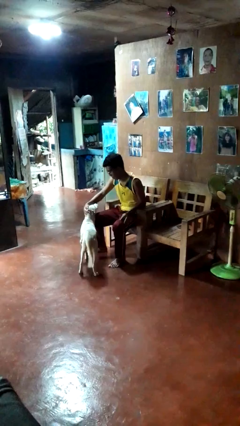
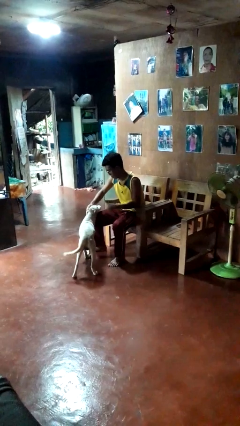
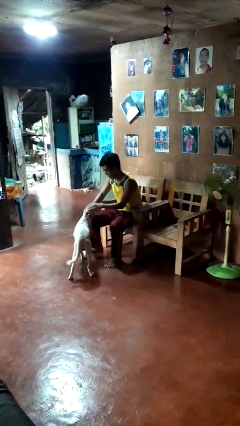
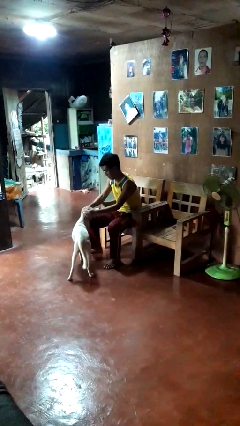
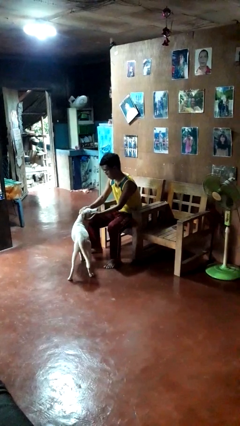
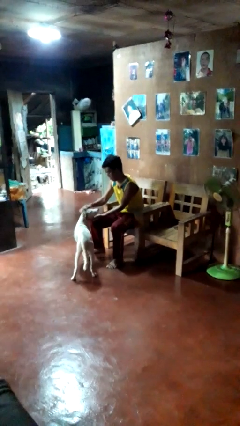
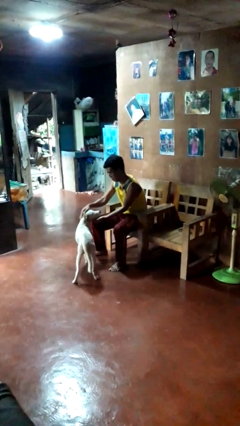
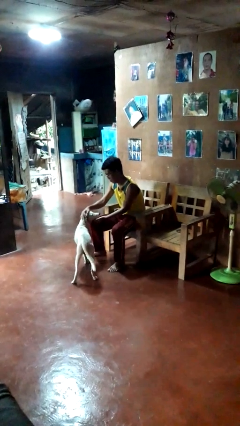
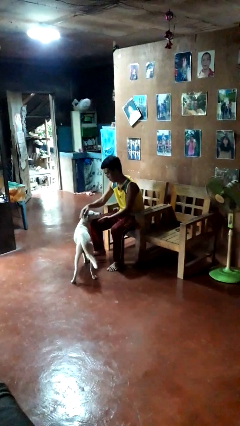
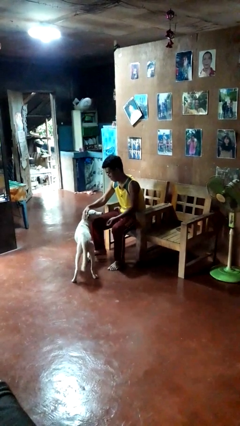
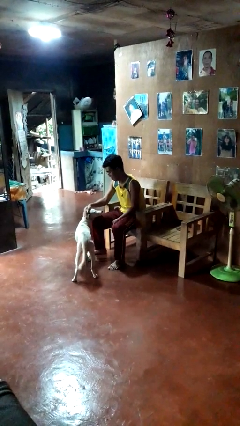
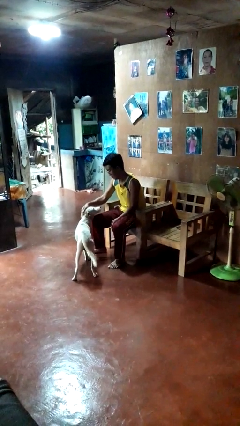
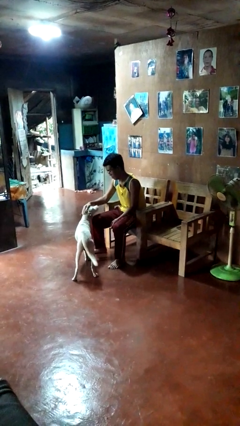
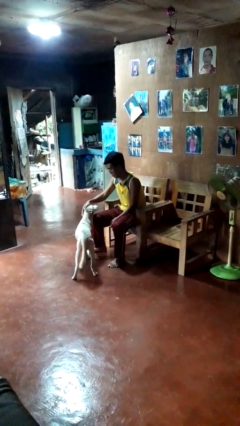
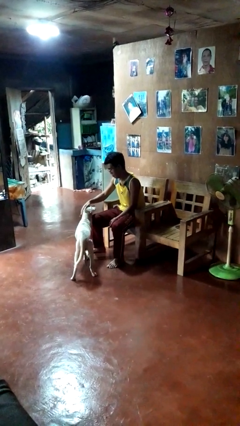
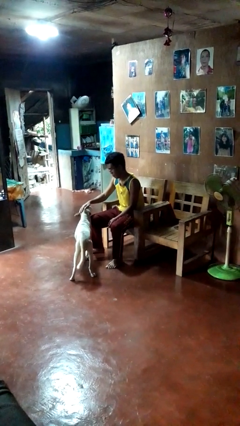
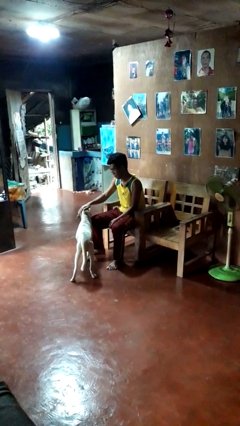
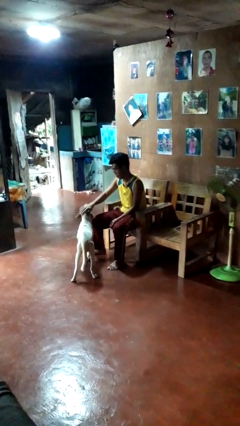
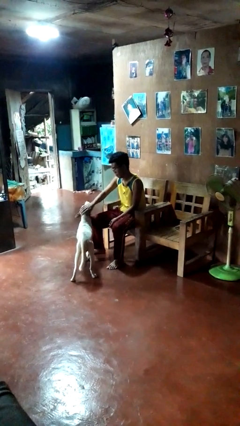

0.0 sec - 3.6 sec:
person pets dog

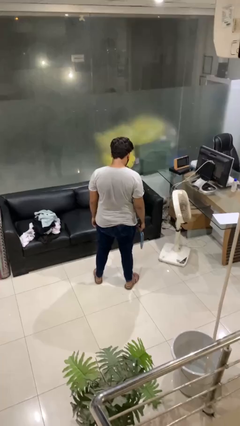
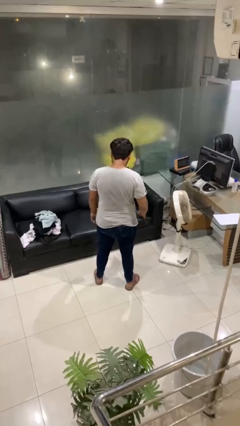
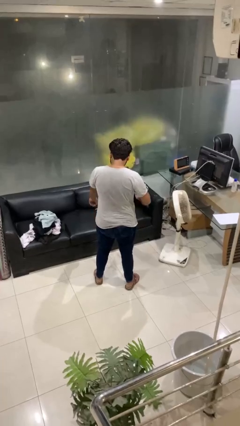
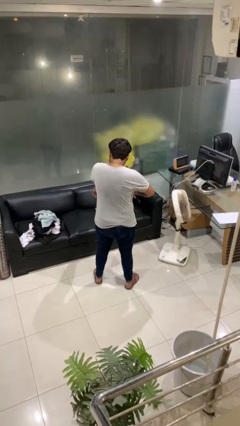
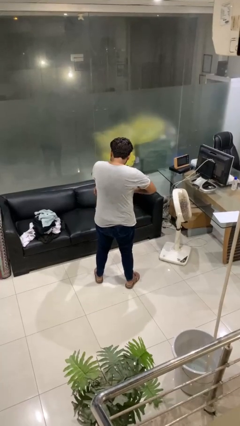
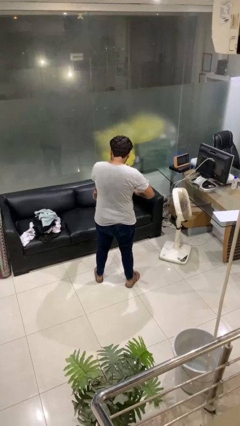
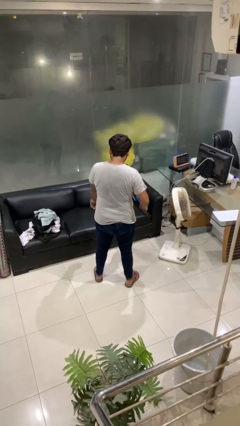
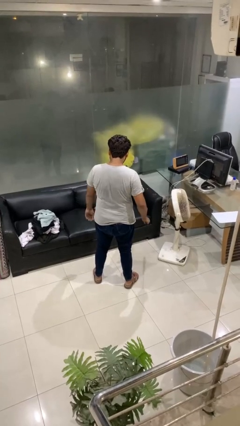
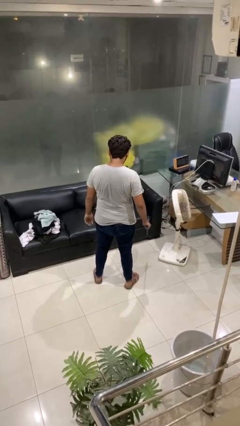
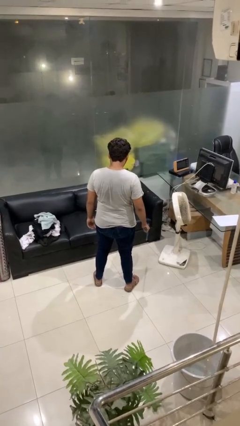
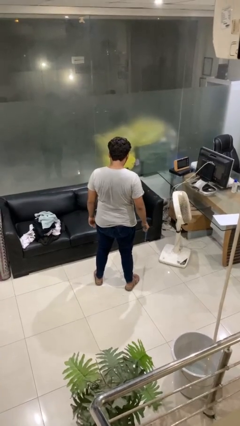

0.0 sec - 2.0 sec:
person swats bug

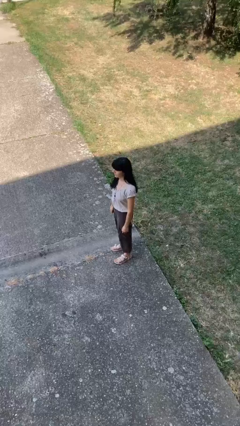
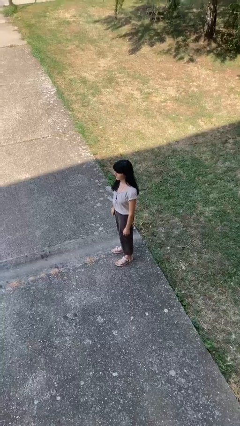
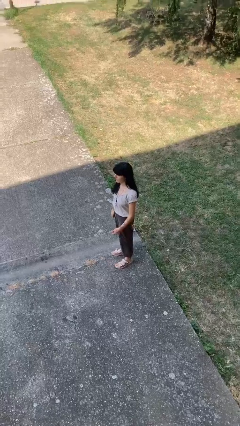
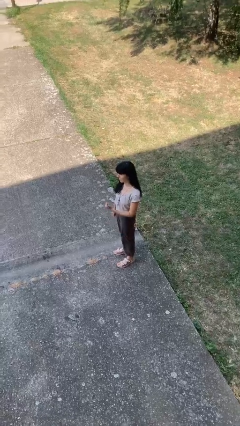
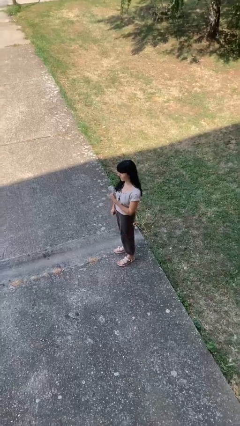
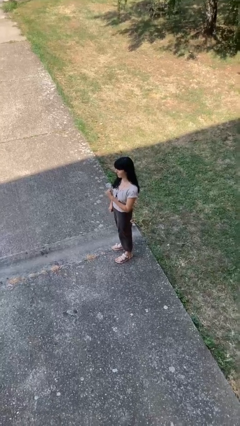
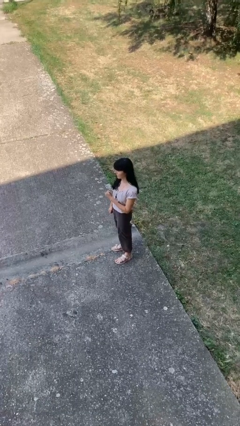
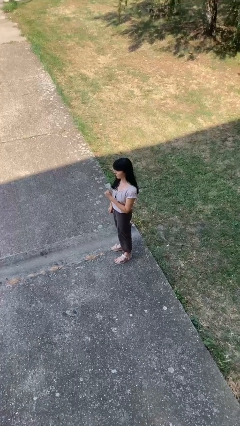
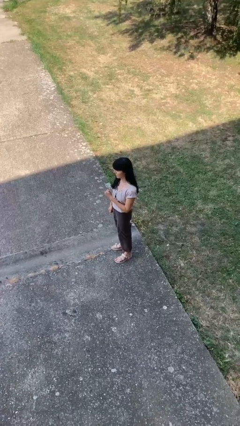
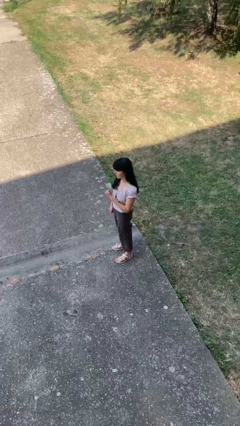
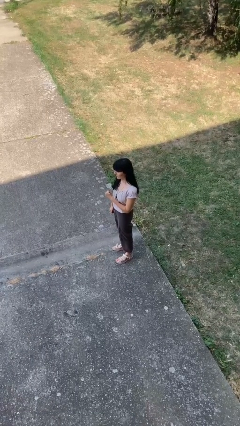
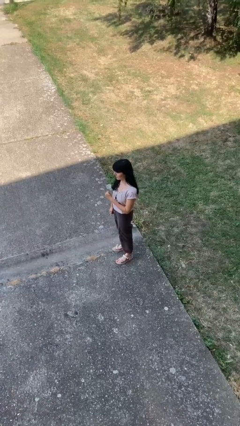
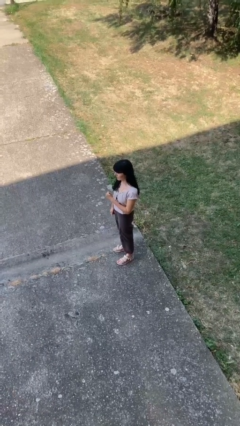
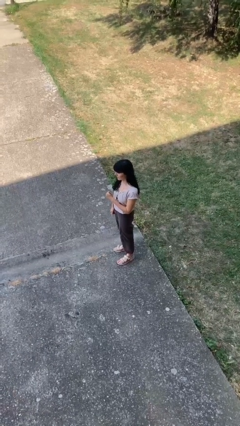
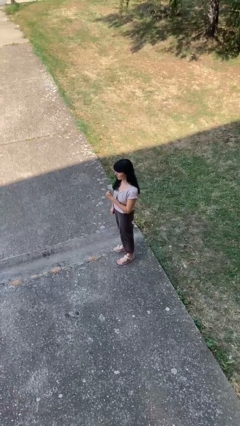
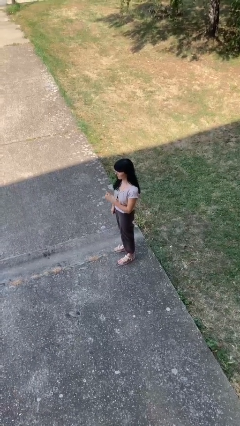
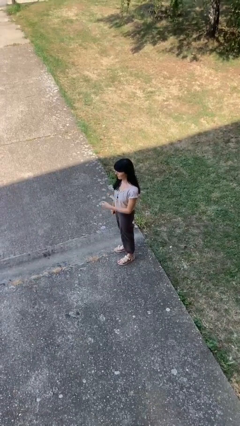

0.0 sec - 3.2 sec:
person gestures thumbs up

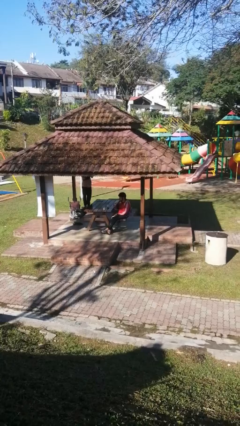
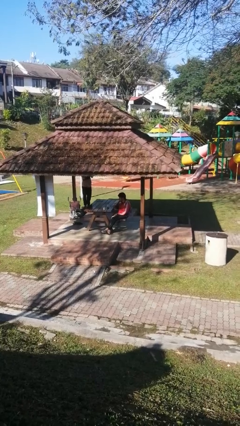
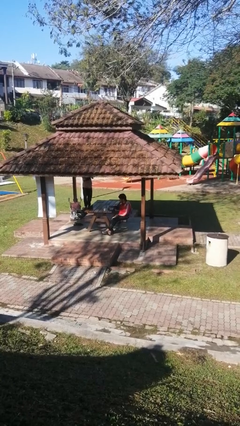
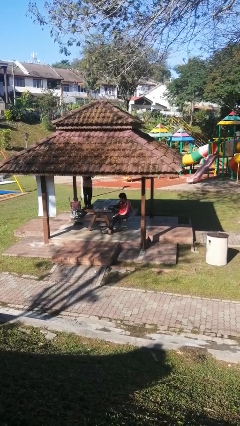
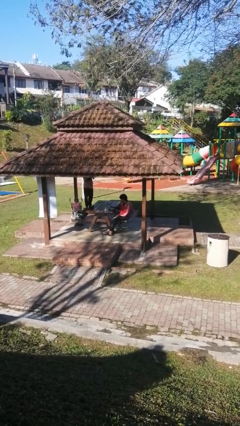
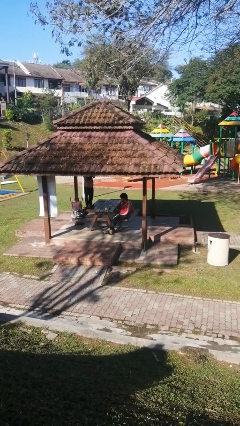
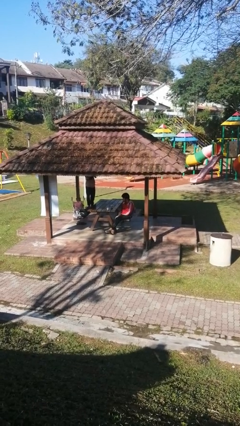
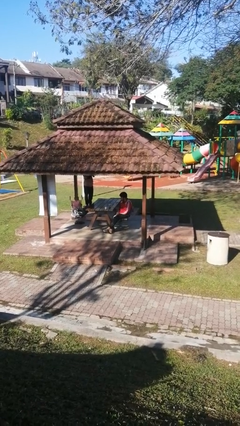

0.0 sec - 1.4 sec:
person puts down object on table

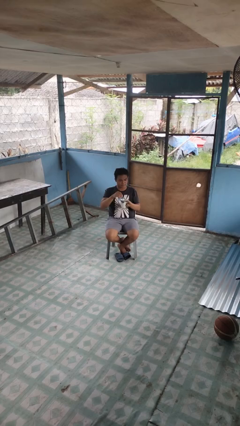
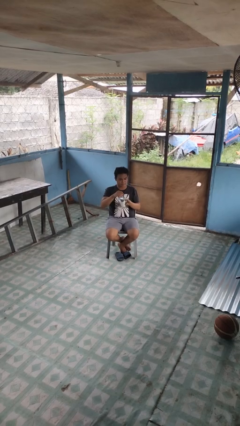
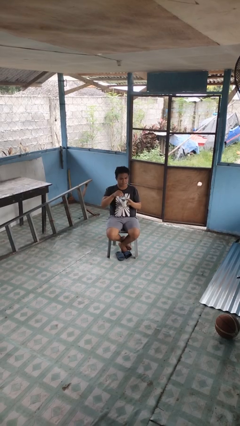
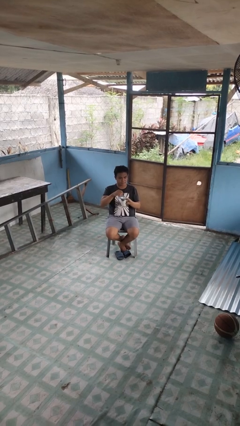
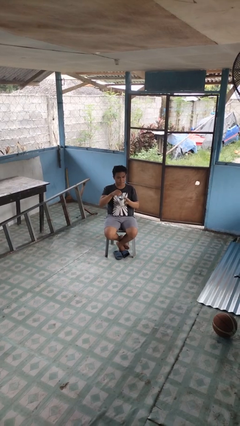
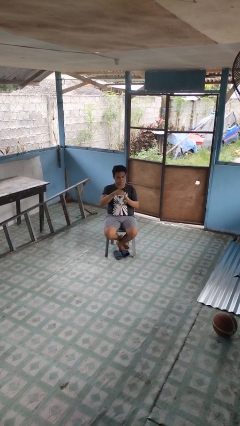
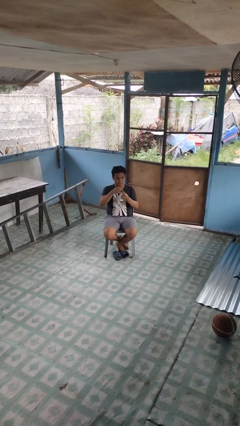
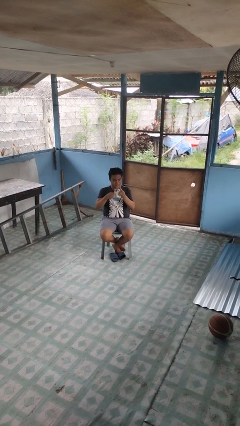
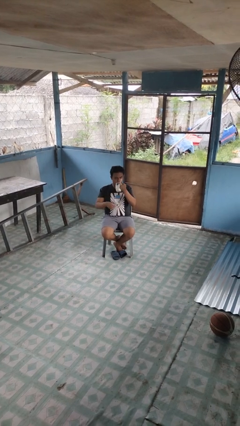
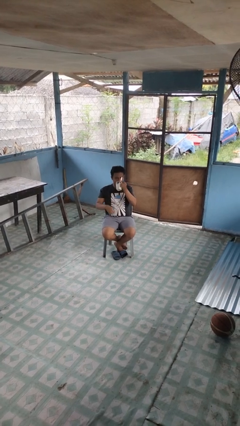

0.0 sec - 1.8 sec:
person stirs mug

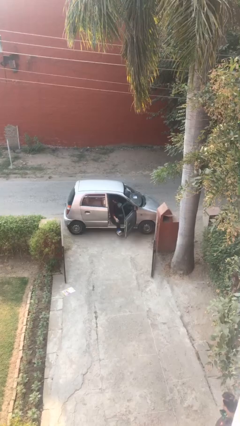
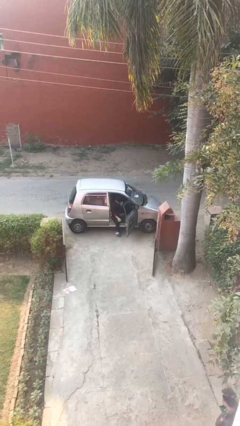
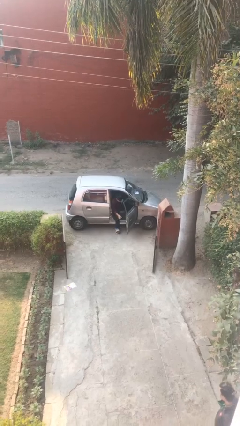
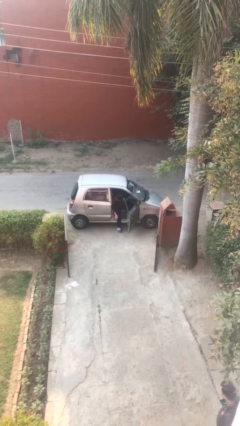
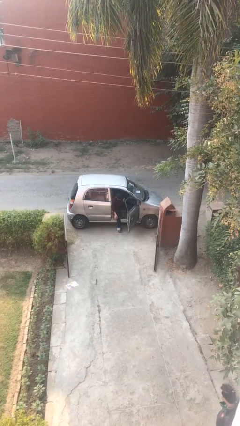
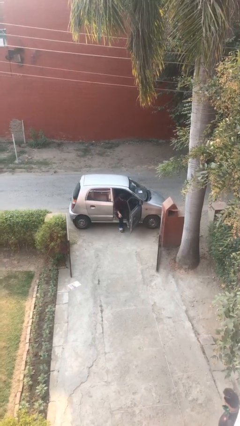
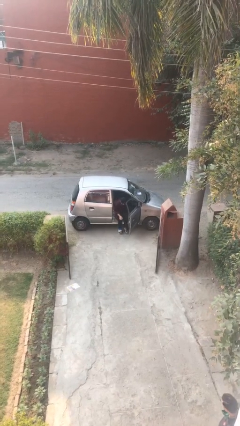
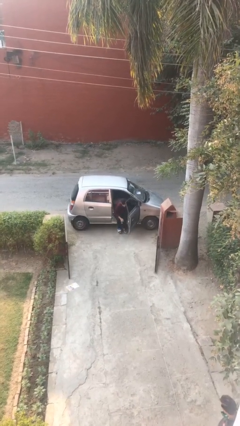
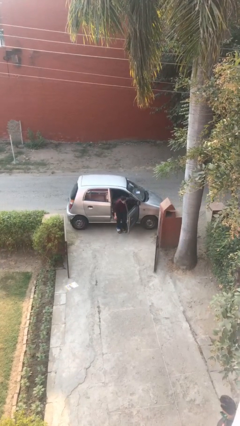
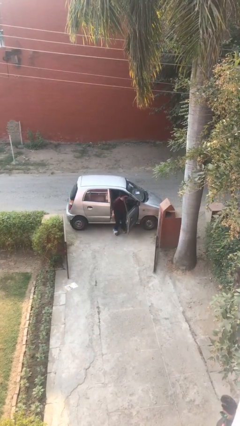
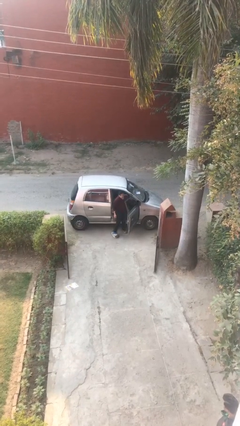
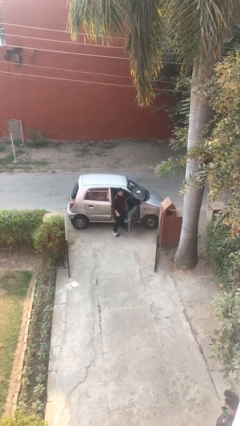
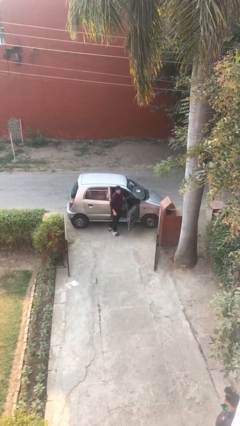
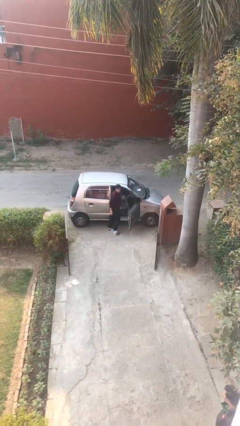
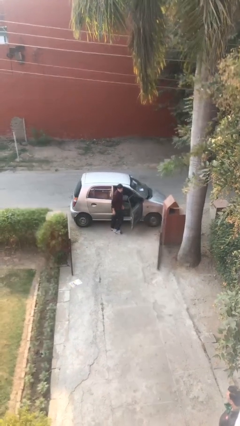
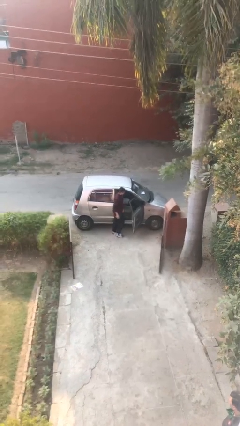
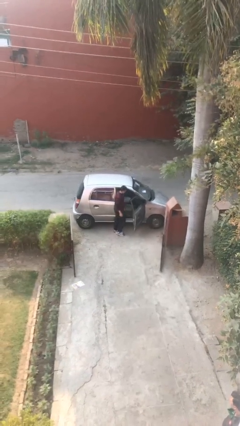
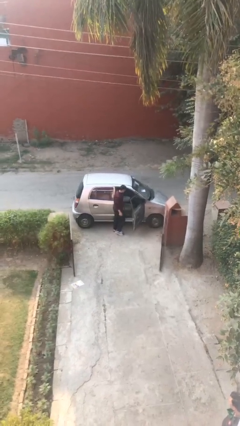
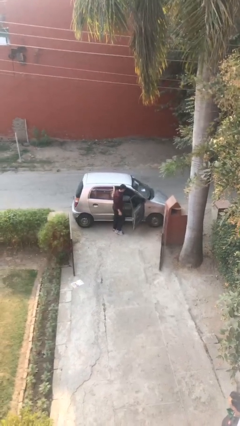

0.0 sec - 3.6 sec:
person exits car

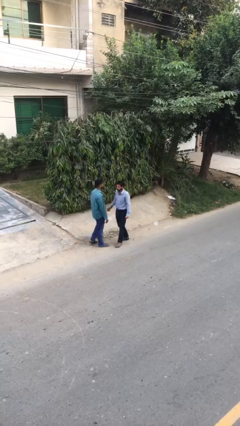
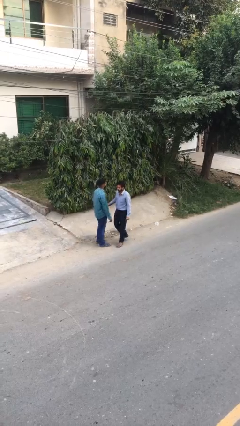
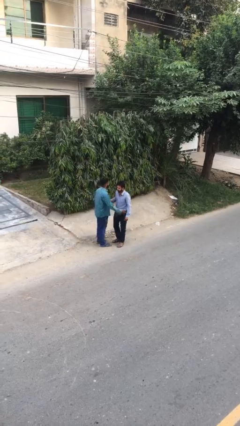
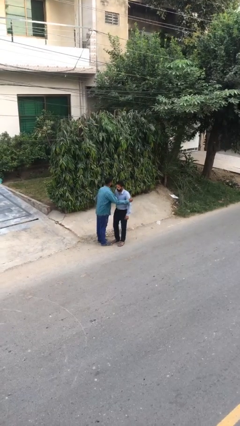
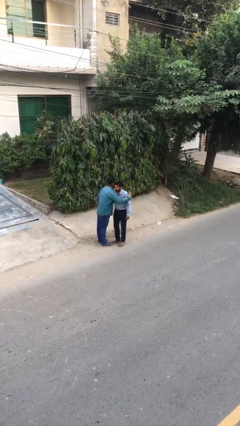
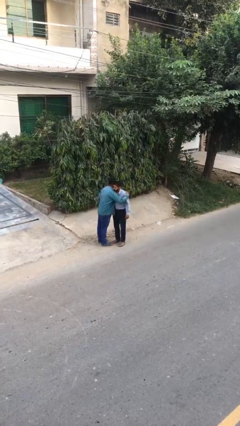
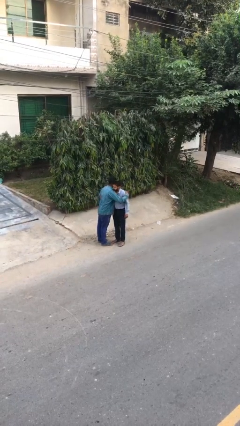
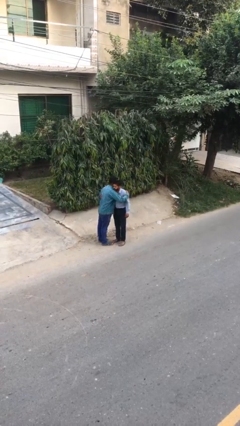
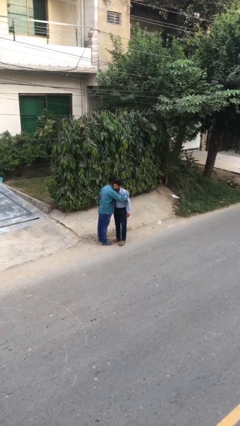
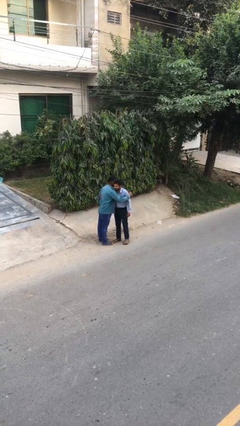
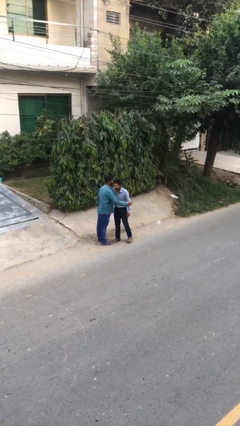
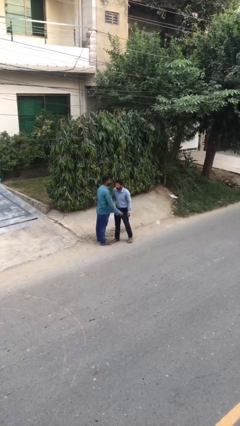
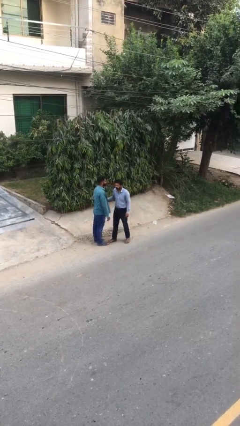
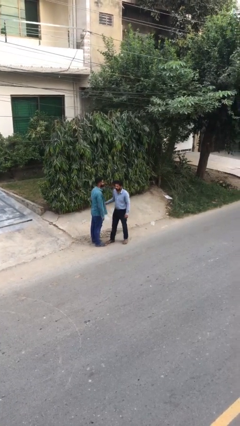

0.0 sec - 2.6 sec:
person embraces person
